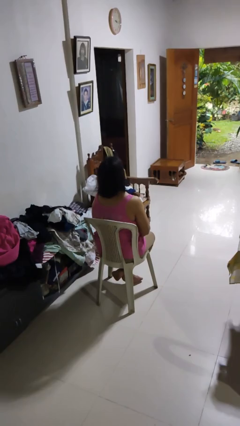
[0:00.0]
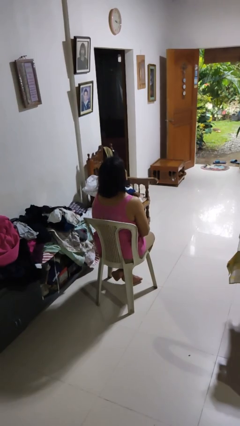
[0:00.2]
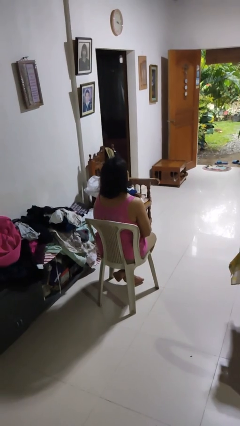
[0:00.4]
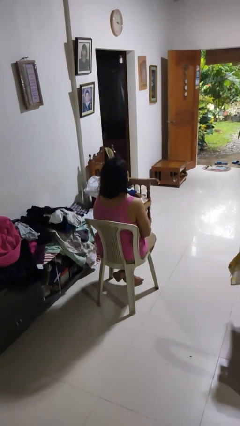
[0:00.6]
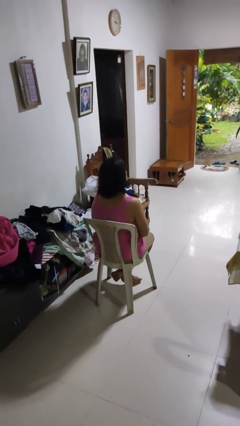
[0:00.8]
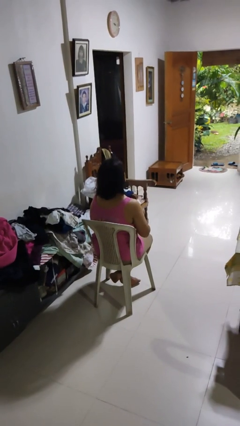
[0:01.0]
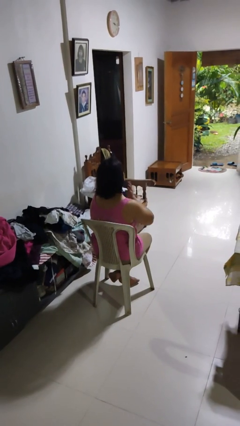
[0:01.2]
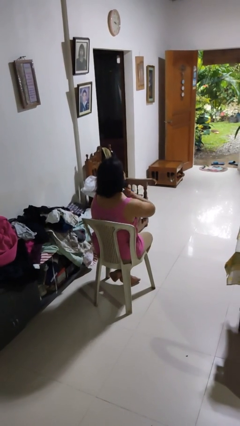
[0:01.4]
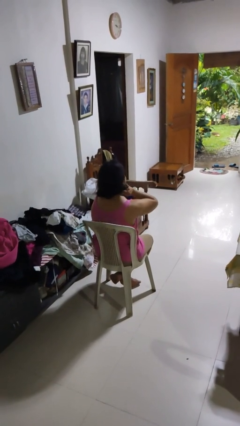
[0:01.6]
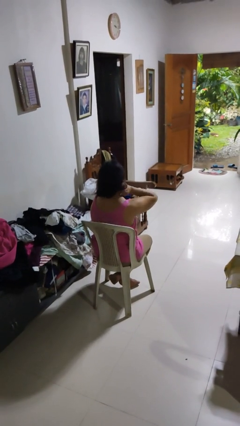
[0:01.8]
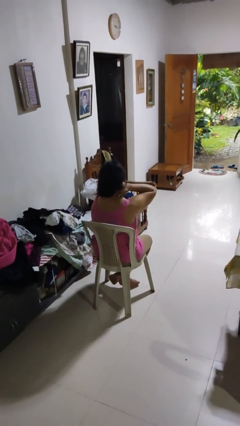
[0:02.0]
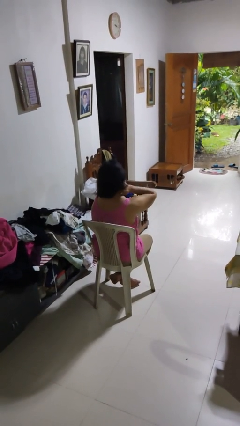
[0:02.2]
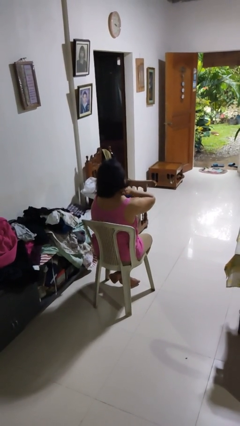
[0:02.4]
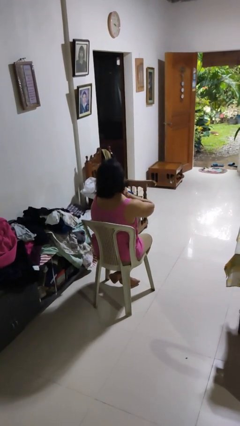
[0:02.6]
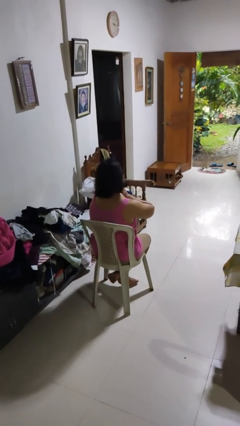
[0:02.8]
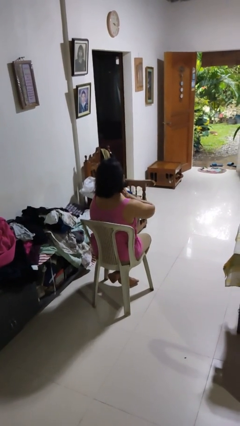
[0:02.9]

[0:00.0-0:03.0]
person rubs neck

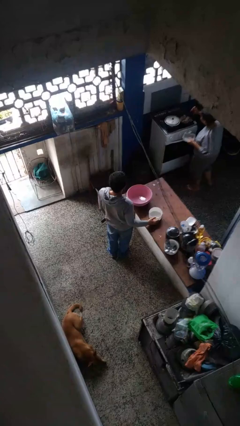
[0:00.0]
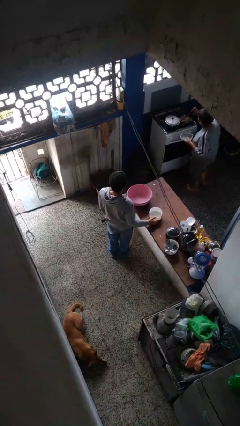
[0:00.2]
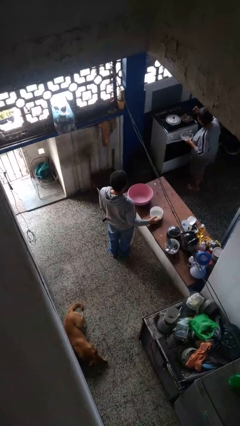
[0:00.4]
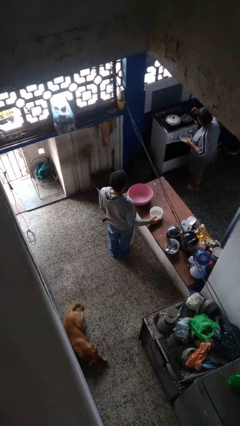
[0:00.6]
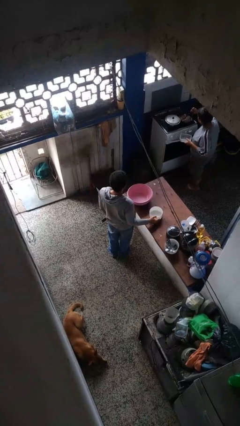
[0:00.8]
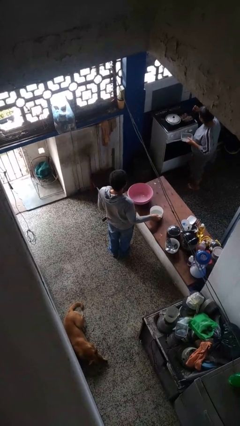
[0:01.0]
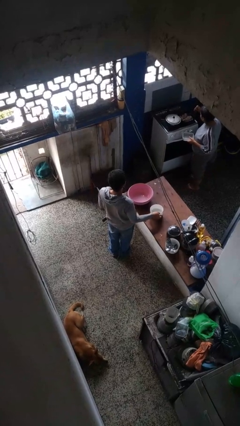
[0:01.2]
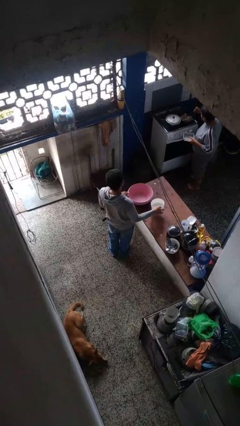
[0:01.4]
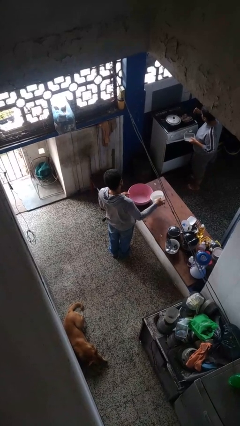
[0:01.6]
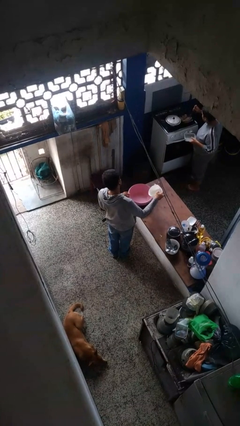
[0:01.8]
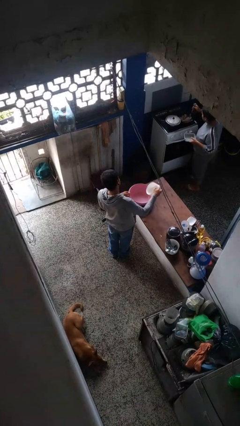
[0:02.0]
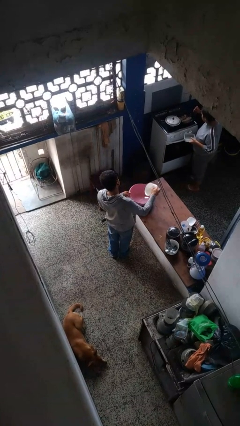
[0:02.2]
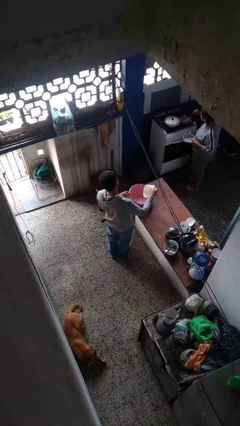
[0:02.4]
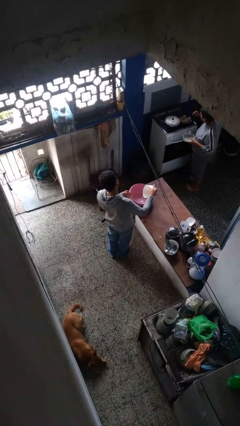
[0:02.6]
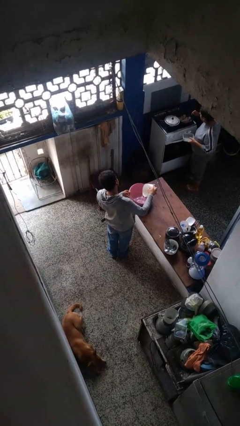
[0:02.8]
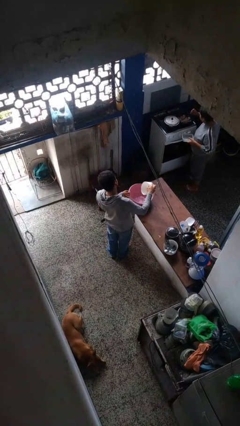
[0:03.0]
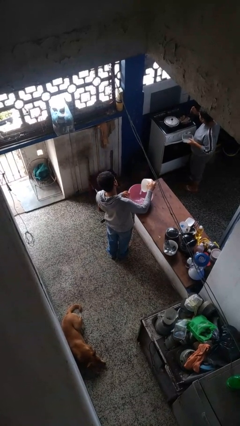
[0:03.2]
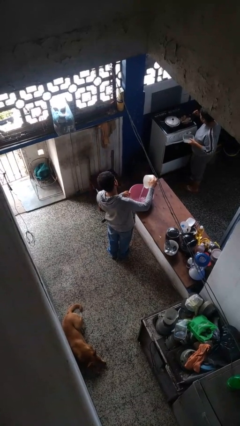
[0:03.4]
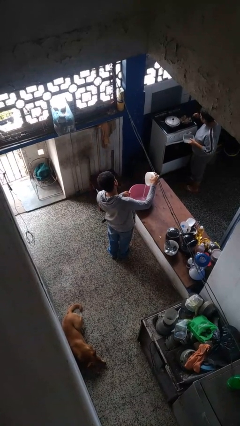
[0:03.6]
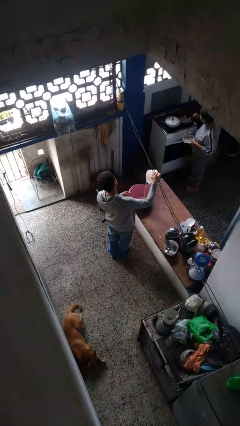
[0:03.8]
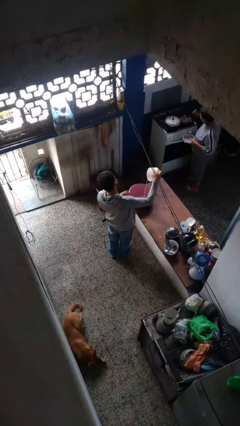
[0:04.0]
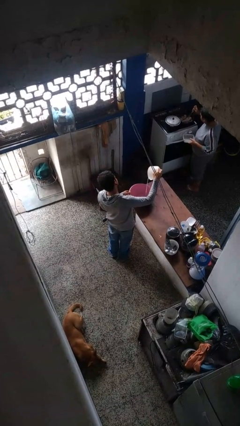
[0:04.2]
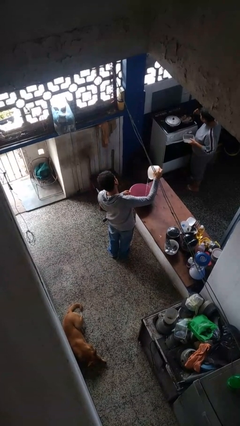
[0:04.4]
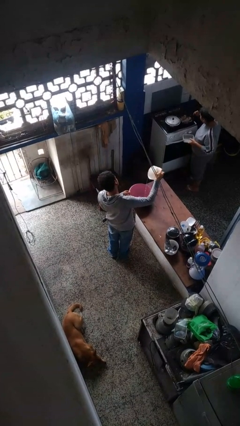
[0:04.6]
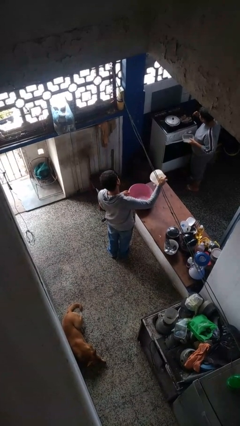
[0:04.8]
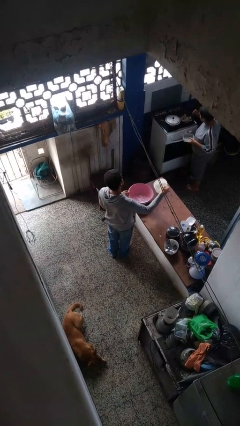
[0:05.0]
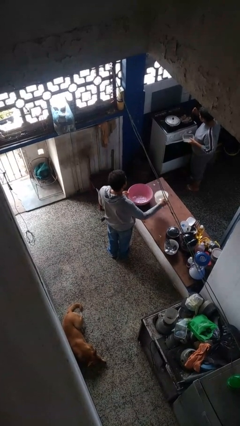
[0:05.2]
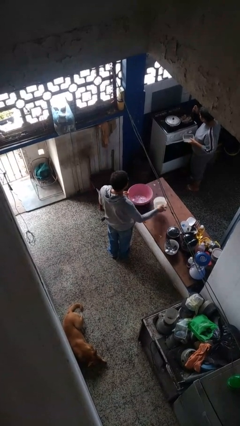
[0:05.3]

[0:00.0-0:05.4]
person pours into bowl

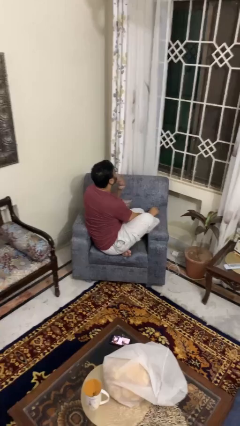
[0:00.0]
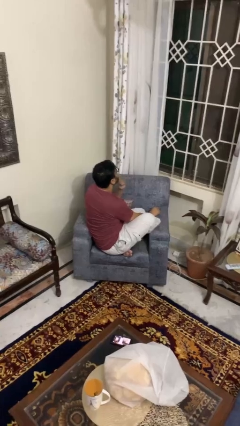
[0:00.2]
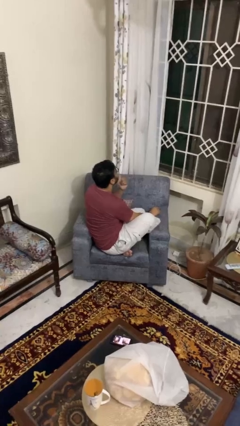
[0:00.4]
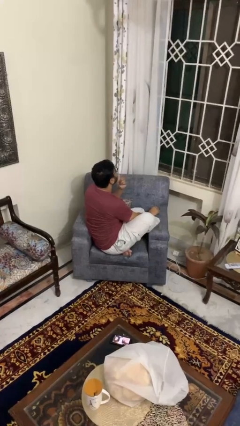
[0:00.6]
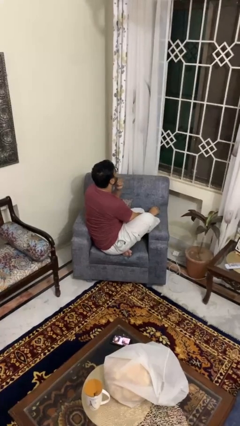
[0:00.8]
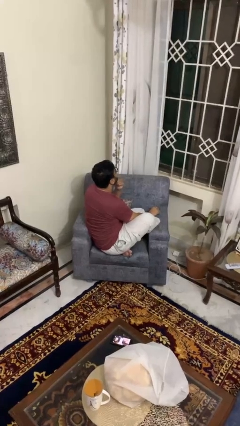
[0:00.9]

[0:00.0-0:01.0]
person strokes chin

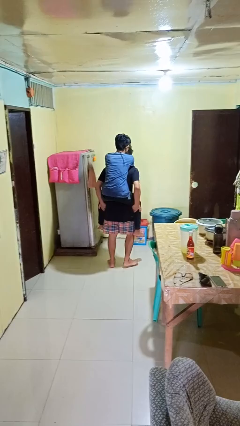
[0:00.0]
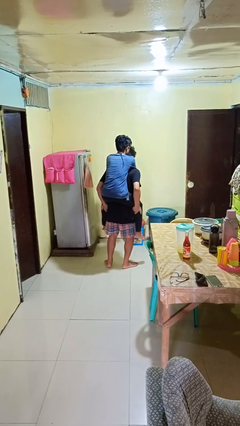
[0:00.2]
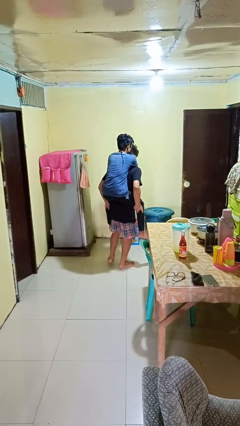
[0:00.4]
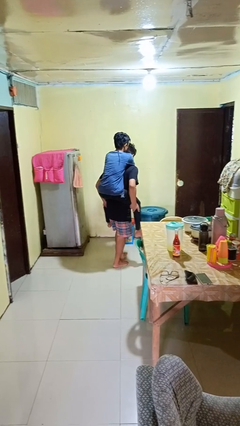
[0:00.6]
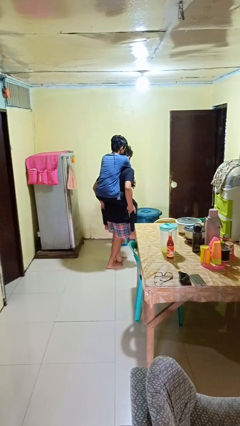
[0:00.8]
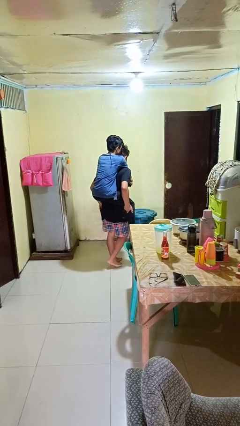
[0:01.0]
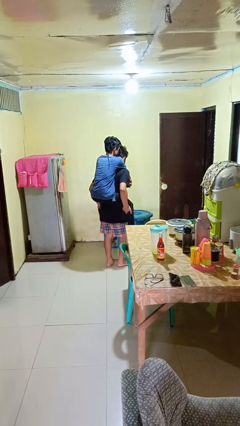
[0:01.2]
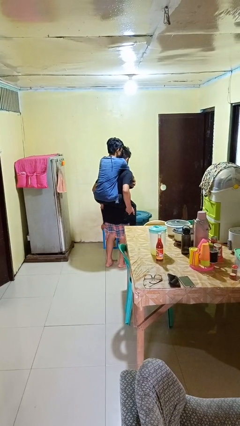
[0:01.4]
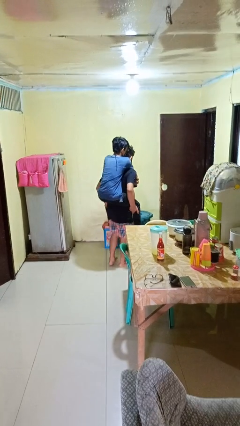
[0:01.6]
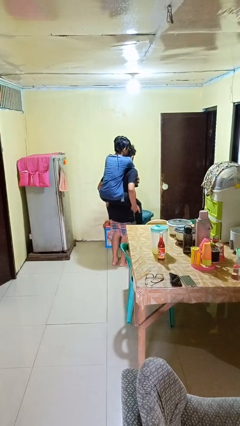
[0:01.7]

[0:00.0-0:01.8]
person carries person on back

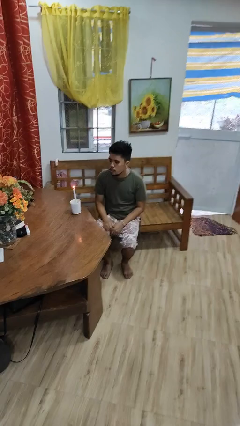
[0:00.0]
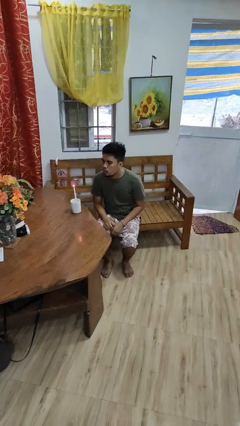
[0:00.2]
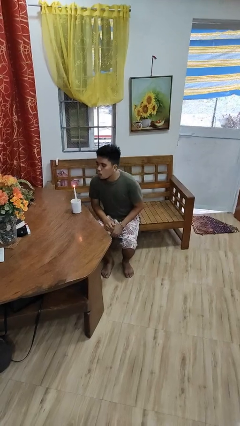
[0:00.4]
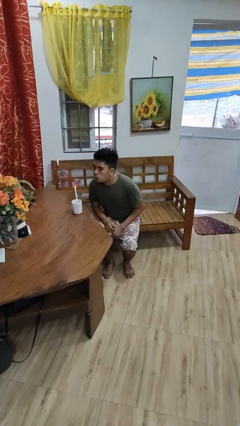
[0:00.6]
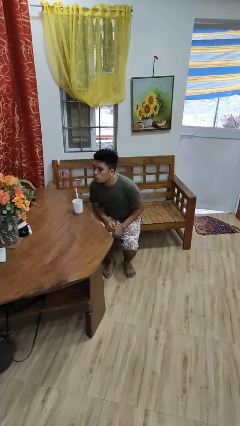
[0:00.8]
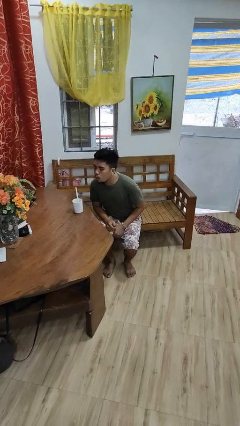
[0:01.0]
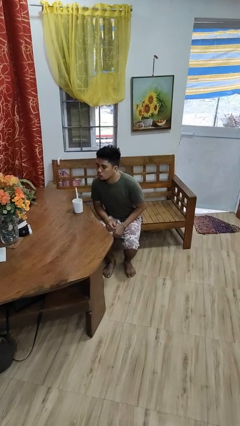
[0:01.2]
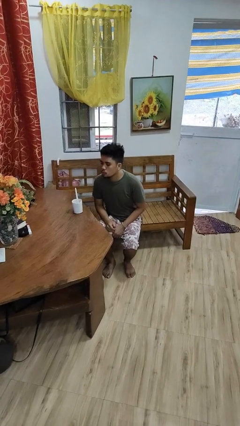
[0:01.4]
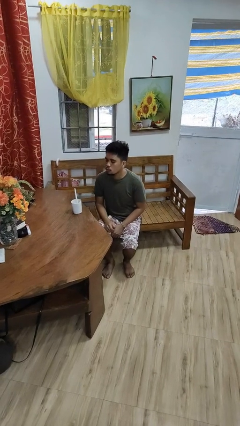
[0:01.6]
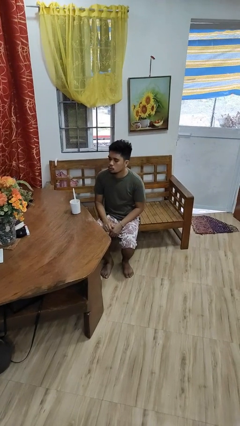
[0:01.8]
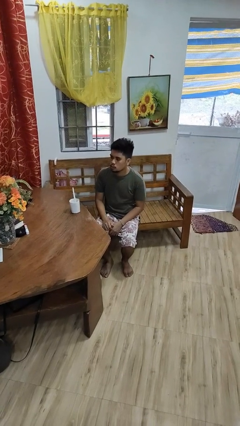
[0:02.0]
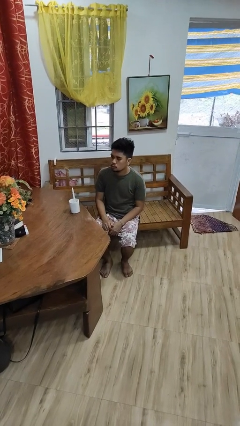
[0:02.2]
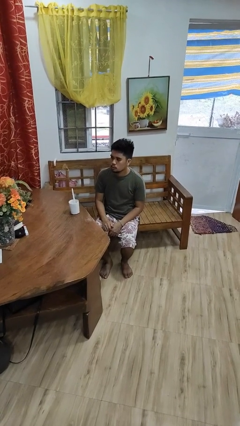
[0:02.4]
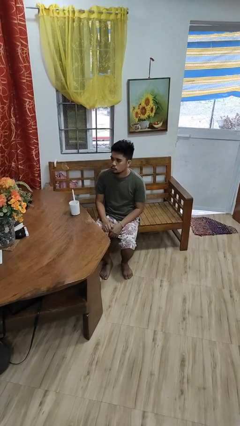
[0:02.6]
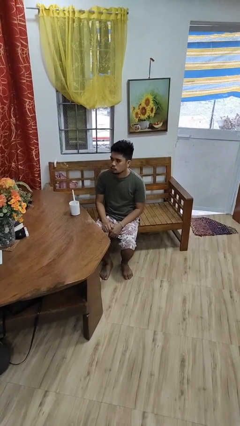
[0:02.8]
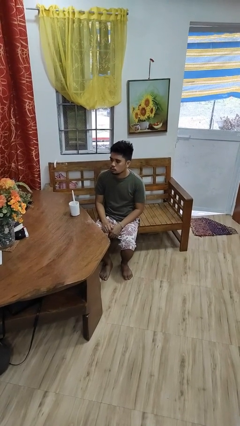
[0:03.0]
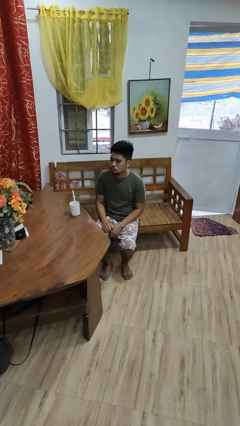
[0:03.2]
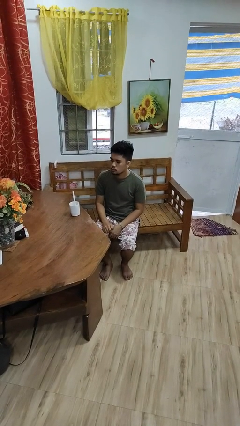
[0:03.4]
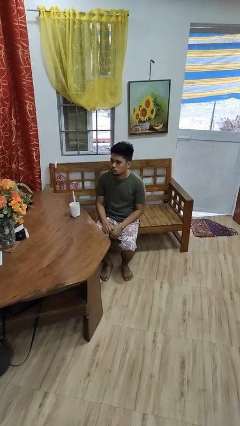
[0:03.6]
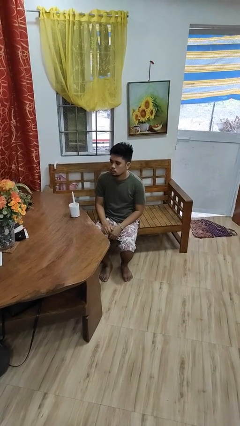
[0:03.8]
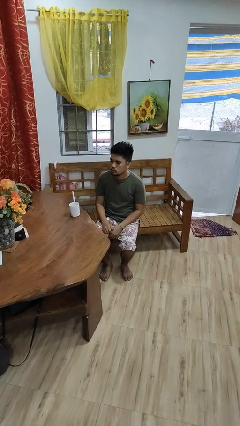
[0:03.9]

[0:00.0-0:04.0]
person extinguishes candle

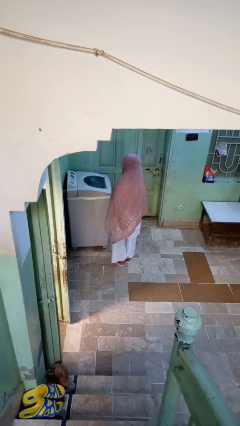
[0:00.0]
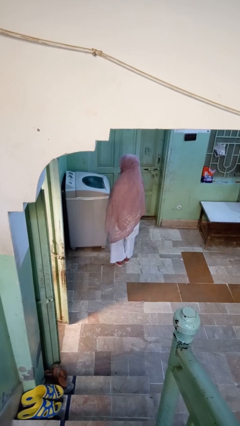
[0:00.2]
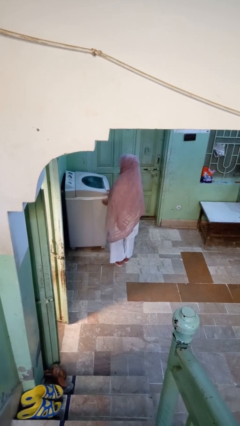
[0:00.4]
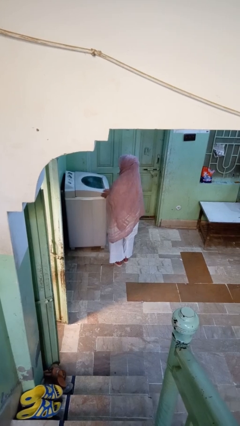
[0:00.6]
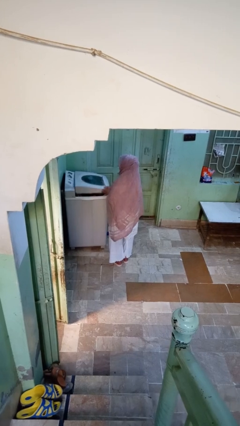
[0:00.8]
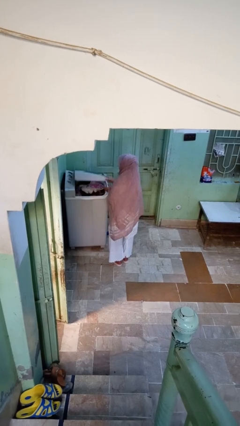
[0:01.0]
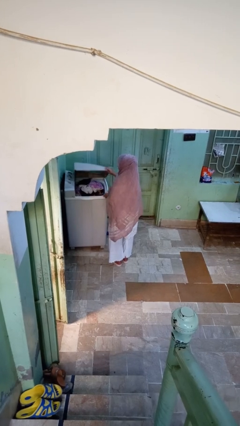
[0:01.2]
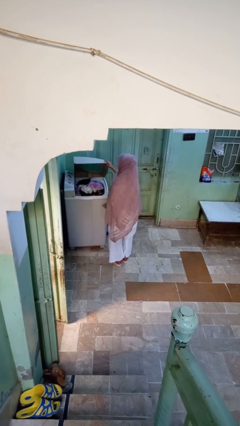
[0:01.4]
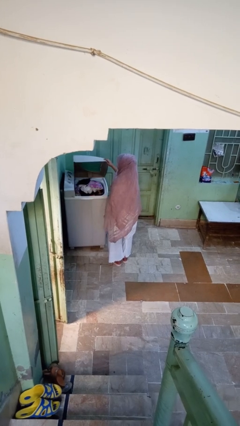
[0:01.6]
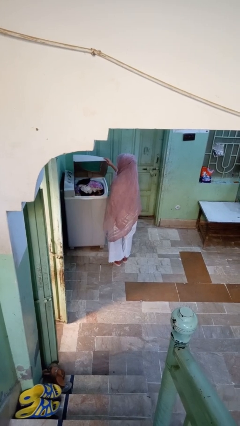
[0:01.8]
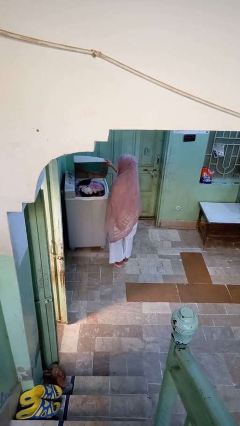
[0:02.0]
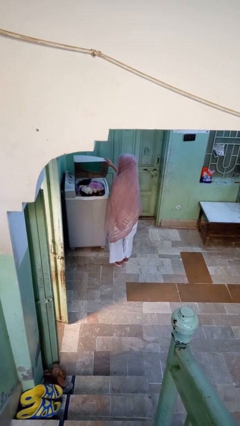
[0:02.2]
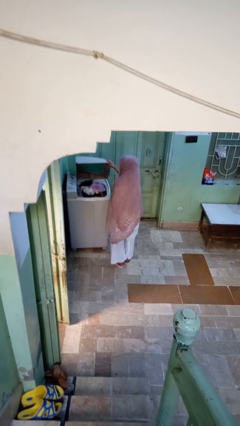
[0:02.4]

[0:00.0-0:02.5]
person opens clothes washer

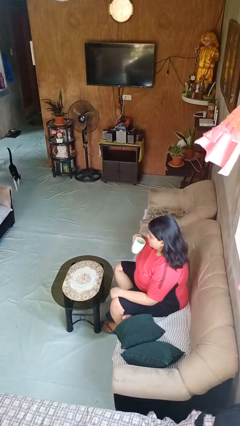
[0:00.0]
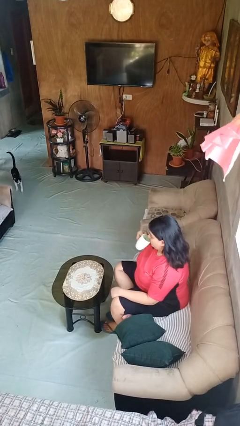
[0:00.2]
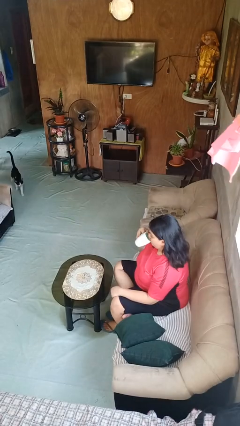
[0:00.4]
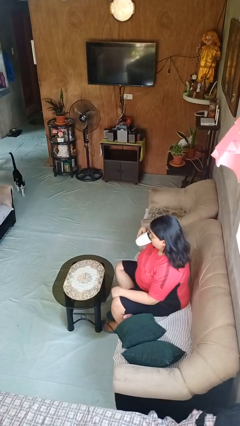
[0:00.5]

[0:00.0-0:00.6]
person drinks from mug
